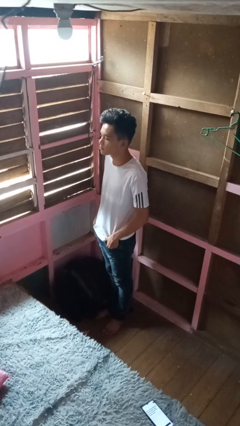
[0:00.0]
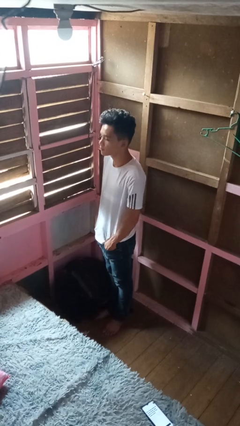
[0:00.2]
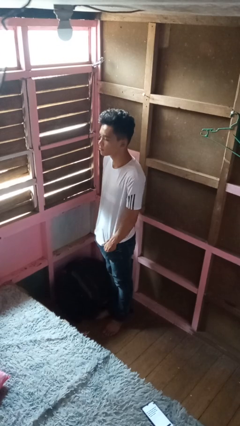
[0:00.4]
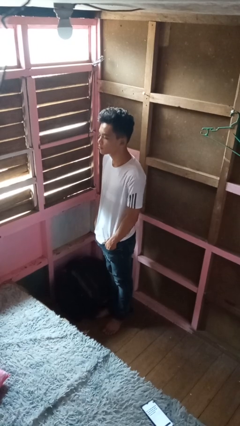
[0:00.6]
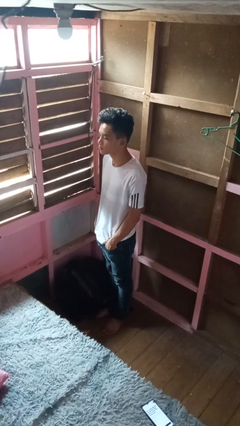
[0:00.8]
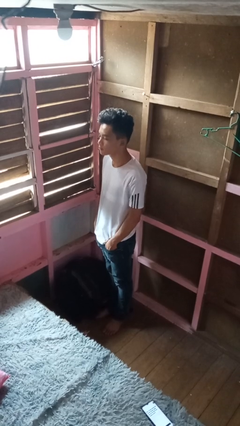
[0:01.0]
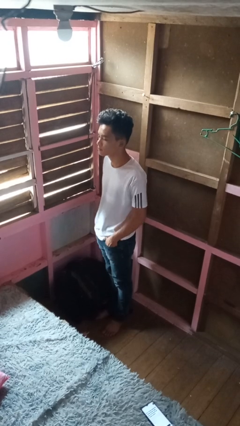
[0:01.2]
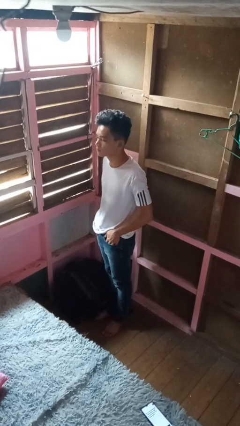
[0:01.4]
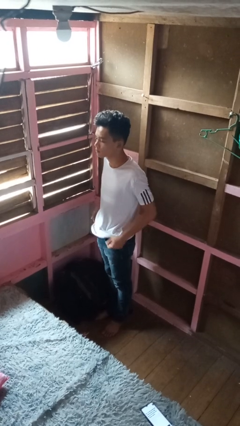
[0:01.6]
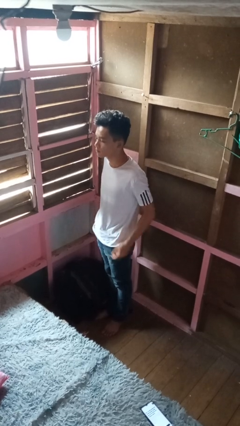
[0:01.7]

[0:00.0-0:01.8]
person puts hands in back pockets

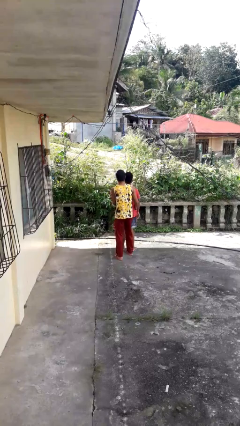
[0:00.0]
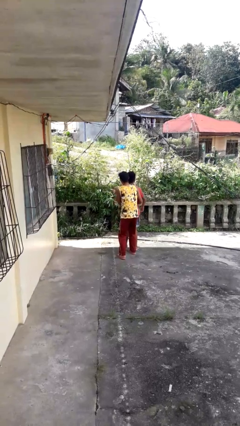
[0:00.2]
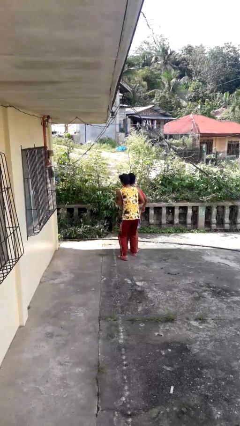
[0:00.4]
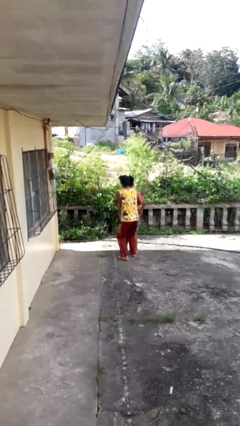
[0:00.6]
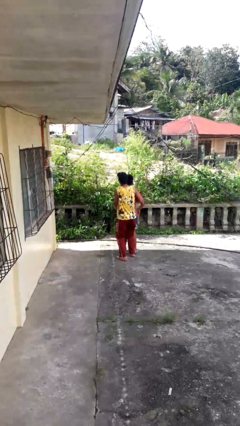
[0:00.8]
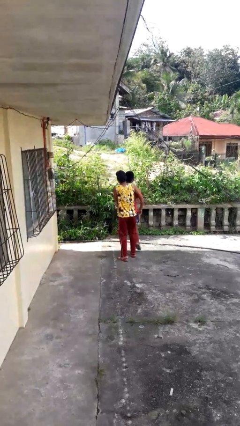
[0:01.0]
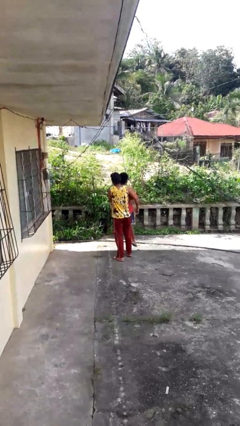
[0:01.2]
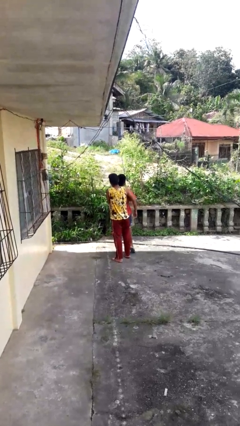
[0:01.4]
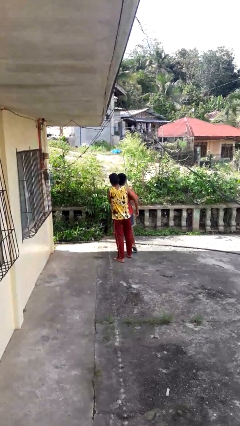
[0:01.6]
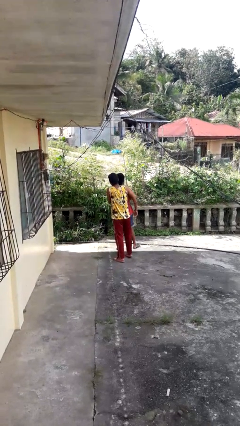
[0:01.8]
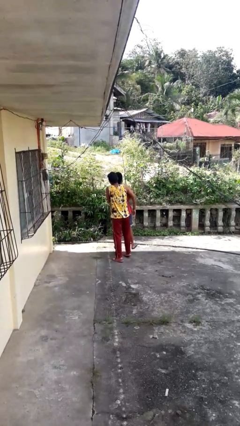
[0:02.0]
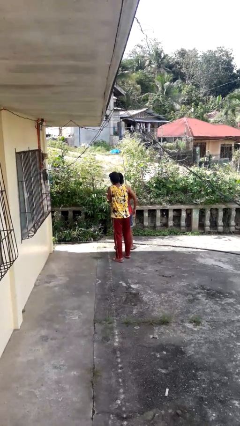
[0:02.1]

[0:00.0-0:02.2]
person picks up person

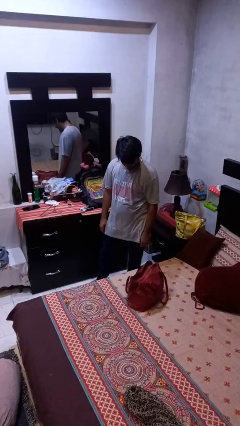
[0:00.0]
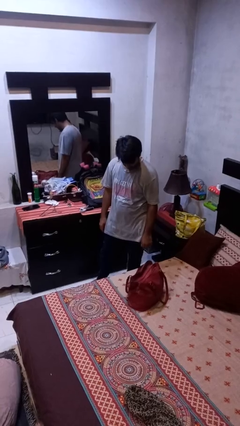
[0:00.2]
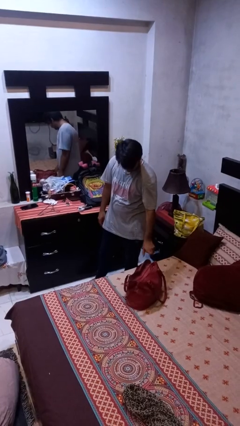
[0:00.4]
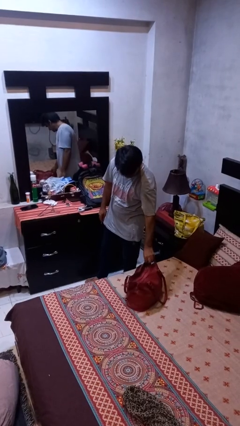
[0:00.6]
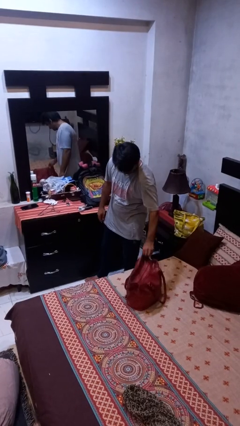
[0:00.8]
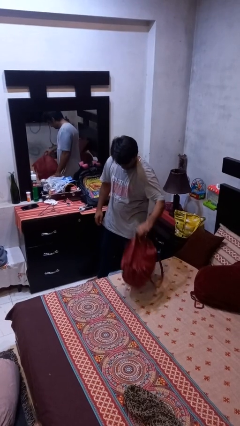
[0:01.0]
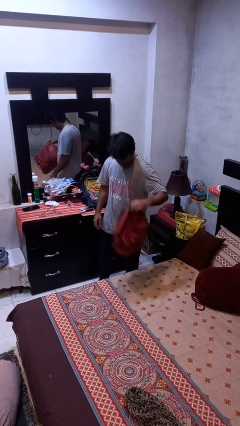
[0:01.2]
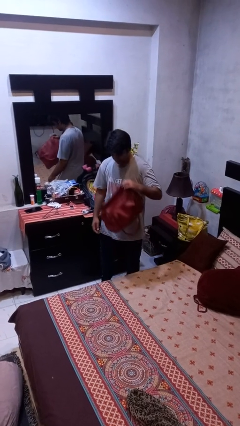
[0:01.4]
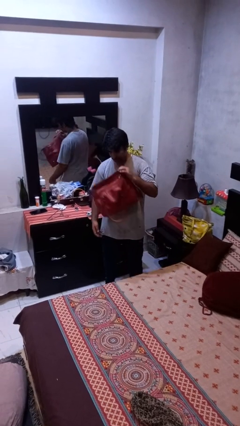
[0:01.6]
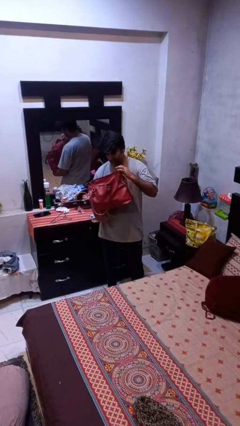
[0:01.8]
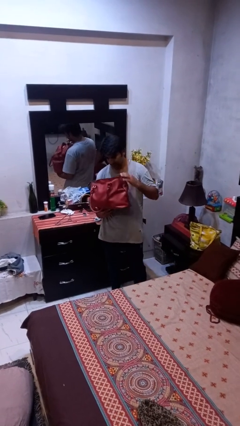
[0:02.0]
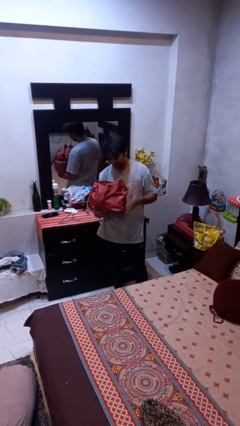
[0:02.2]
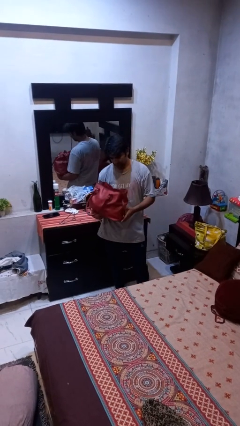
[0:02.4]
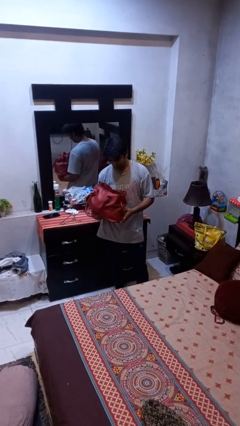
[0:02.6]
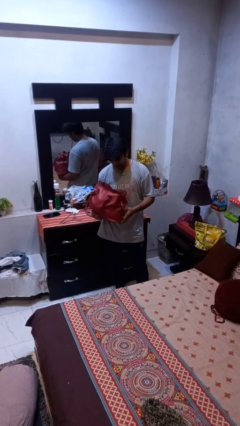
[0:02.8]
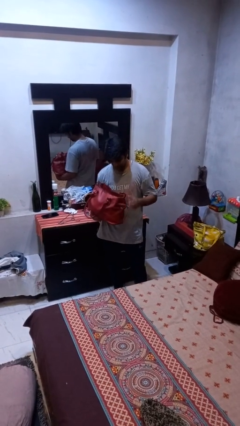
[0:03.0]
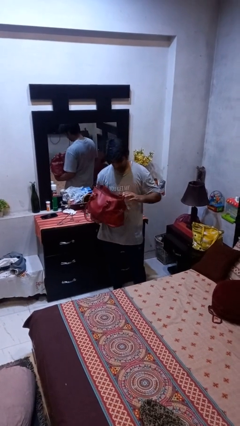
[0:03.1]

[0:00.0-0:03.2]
person picks up object from bed

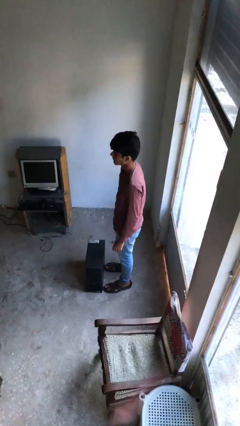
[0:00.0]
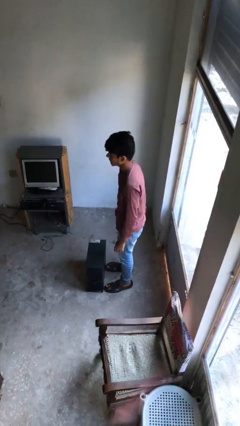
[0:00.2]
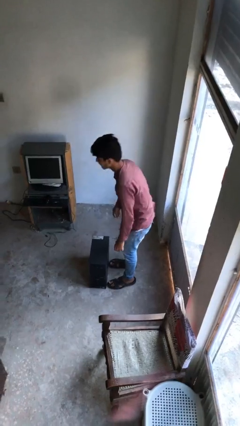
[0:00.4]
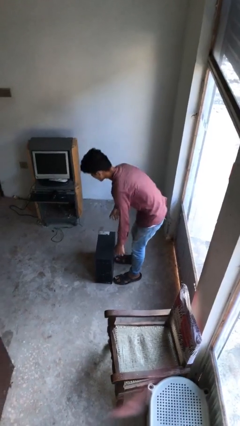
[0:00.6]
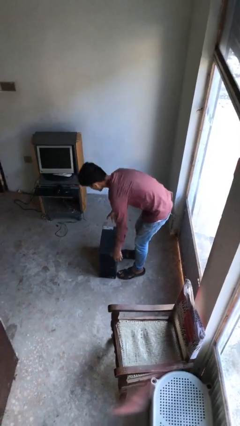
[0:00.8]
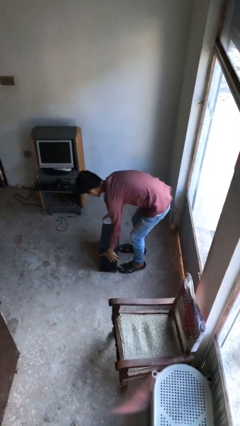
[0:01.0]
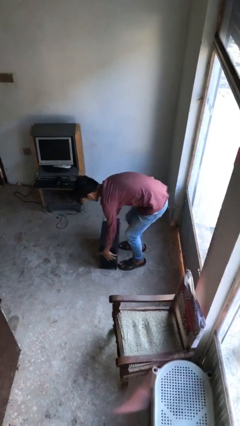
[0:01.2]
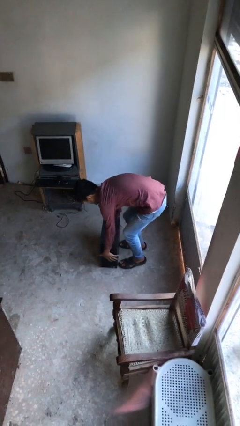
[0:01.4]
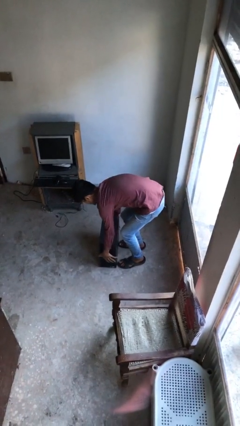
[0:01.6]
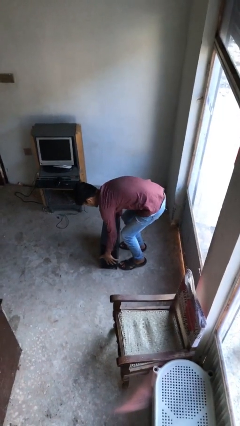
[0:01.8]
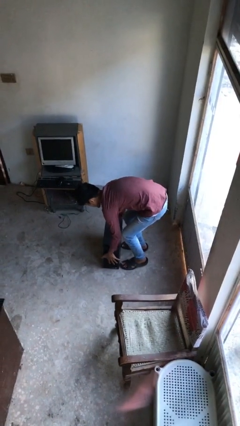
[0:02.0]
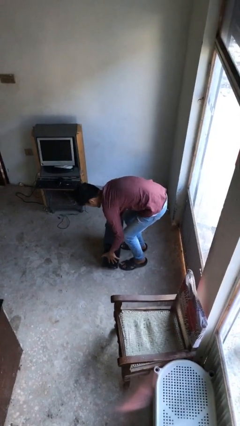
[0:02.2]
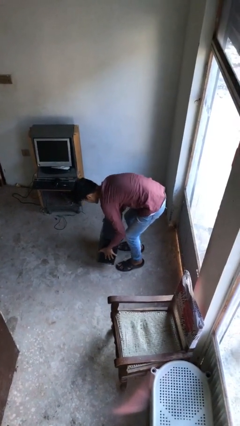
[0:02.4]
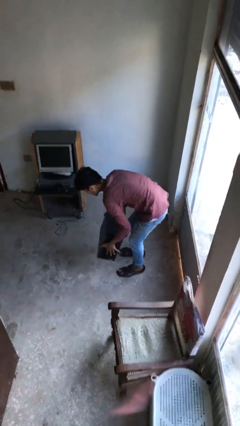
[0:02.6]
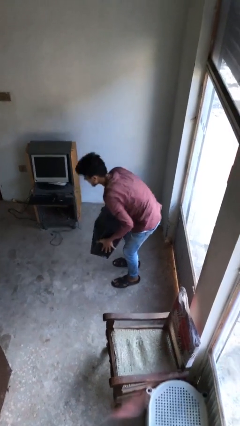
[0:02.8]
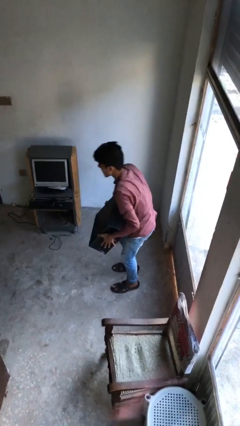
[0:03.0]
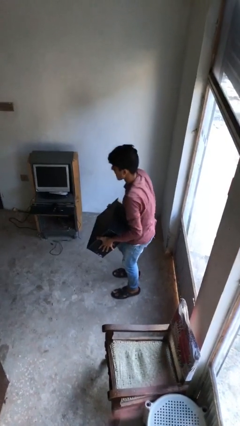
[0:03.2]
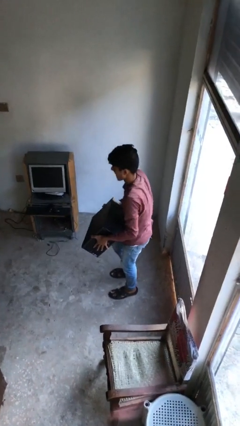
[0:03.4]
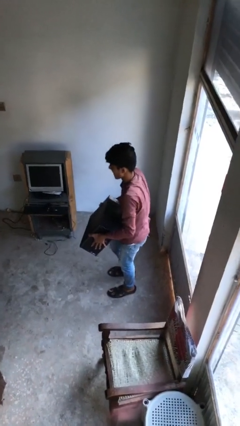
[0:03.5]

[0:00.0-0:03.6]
person picks up object from floor

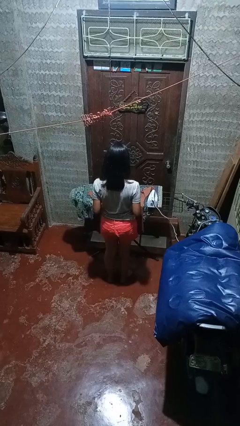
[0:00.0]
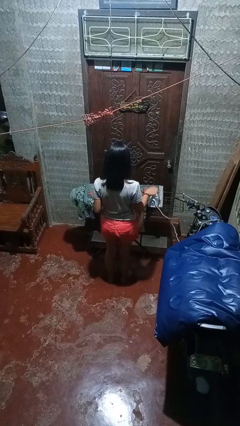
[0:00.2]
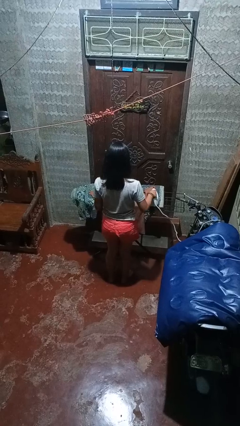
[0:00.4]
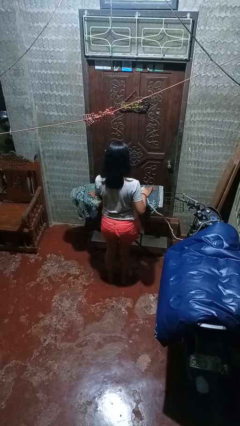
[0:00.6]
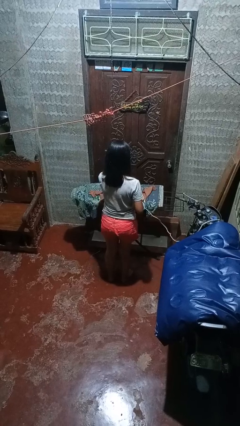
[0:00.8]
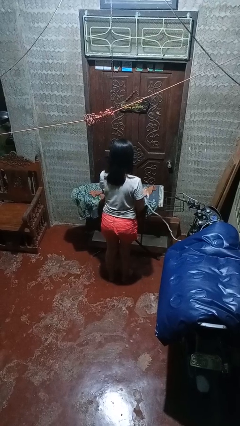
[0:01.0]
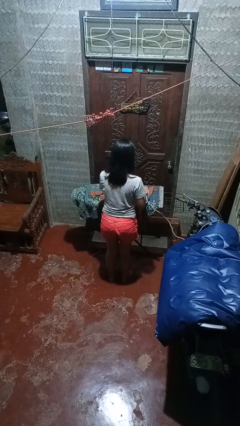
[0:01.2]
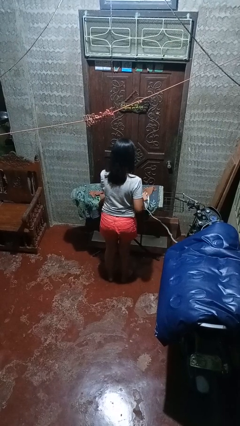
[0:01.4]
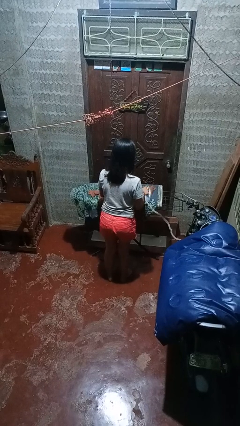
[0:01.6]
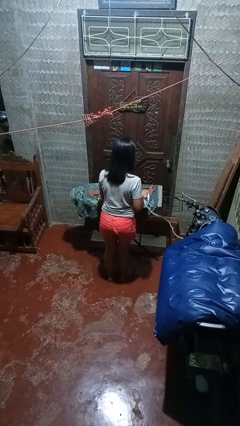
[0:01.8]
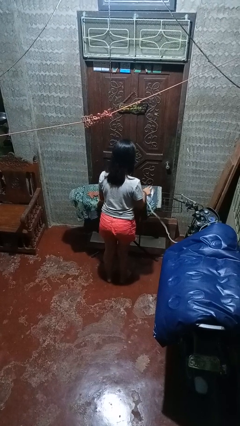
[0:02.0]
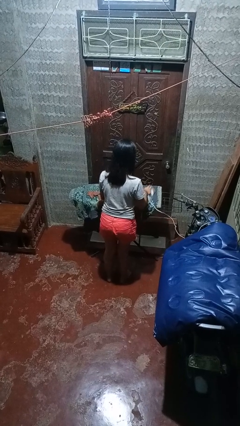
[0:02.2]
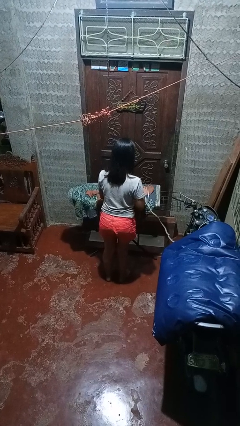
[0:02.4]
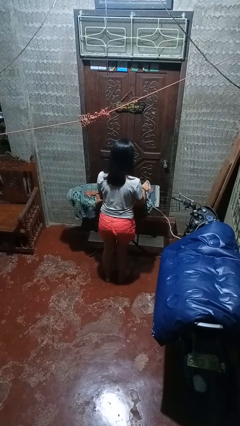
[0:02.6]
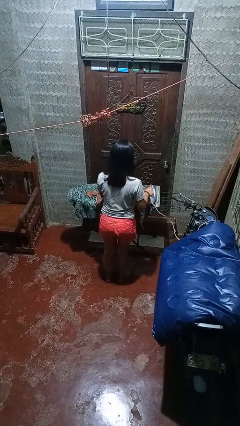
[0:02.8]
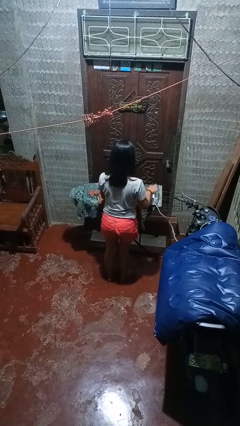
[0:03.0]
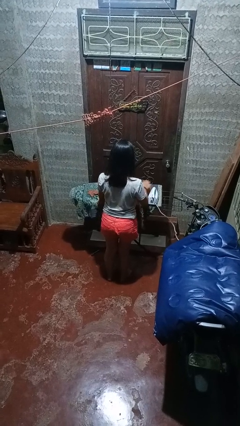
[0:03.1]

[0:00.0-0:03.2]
person irons clothes

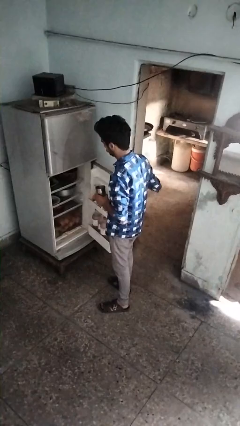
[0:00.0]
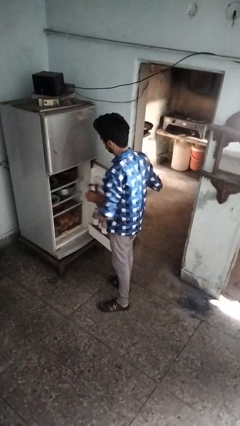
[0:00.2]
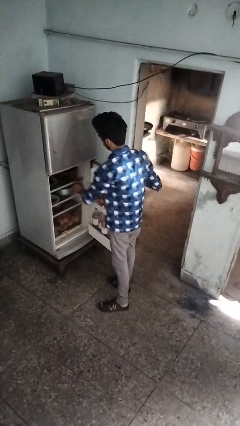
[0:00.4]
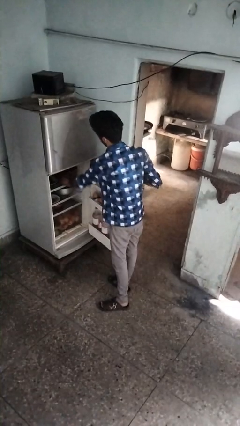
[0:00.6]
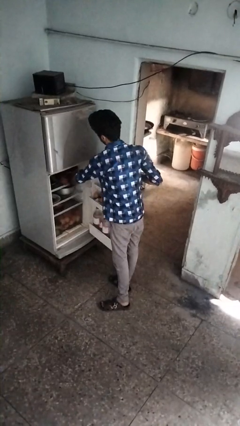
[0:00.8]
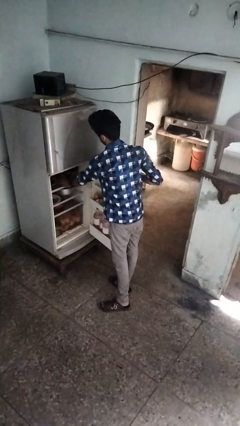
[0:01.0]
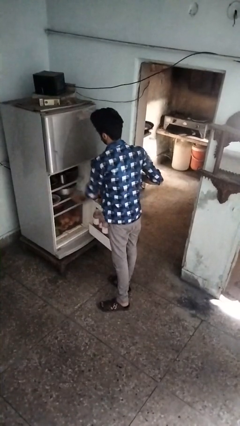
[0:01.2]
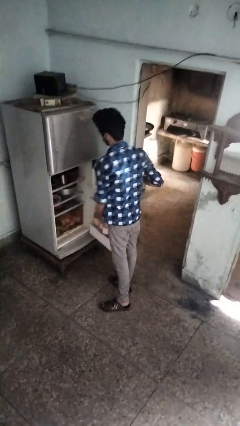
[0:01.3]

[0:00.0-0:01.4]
person puts object into refrigerator

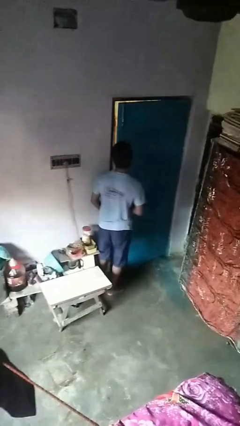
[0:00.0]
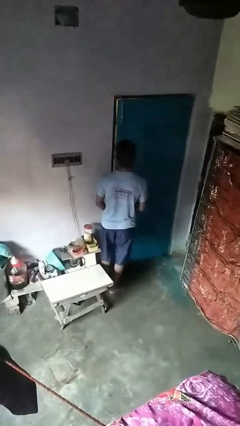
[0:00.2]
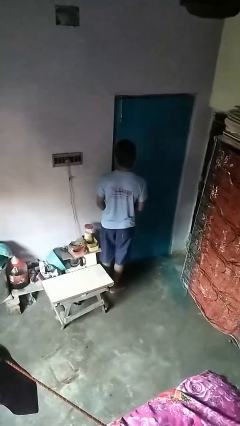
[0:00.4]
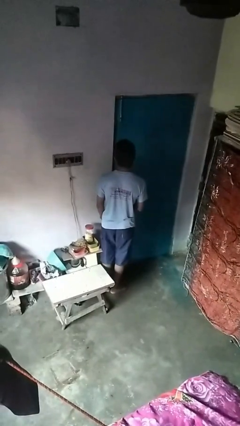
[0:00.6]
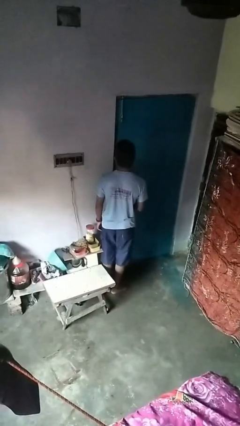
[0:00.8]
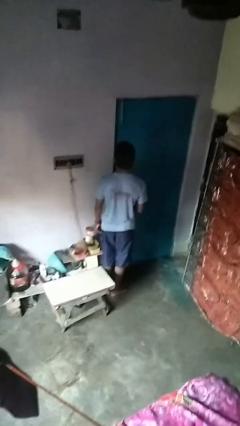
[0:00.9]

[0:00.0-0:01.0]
person closes facility door

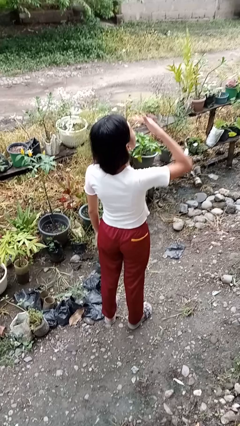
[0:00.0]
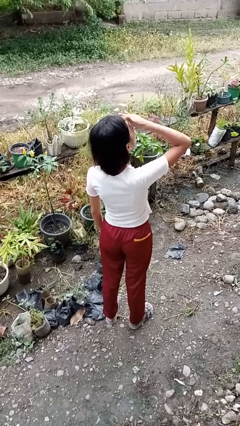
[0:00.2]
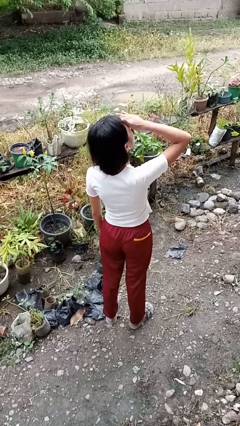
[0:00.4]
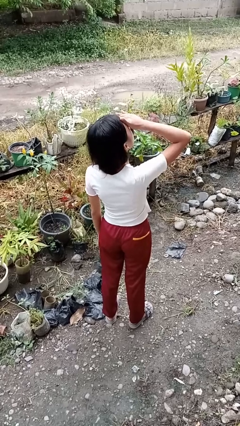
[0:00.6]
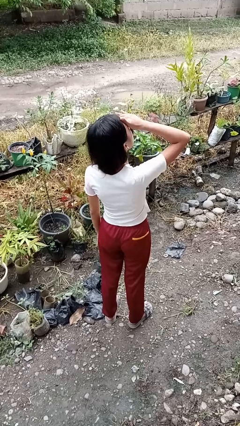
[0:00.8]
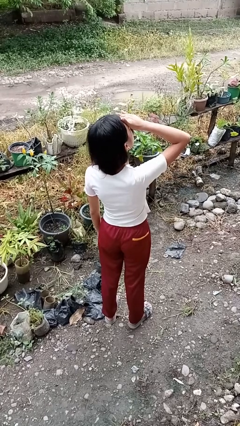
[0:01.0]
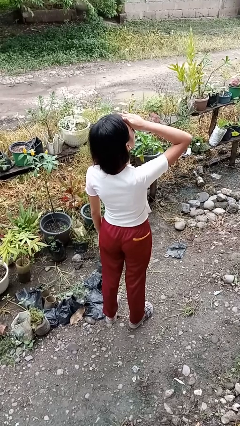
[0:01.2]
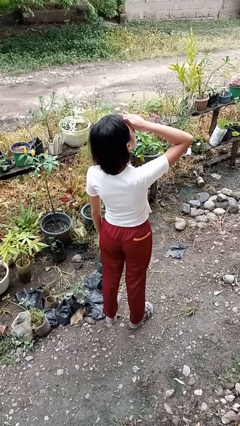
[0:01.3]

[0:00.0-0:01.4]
person shades eyes
